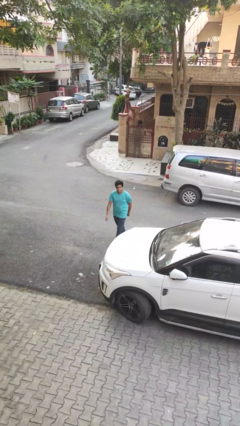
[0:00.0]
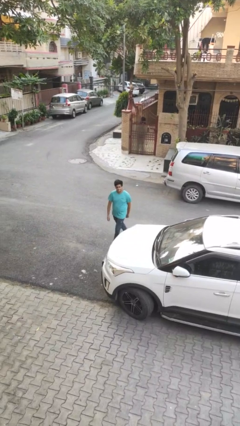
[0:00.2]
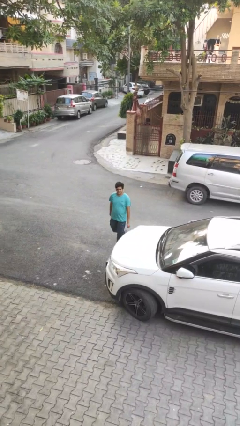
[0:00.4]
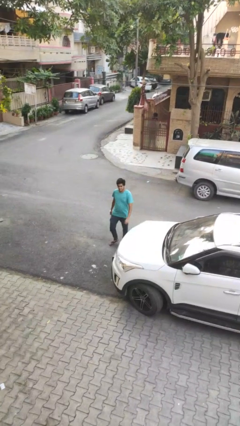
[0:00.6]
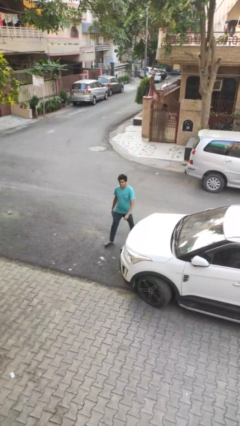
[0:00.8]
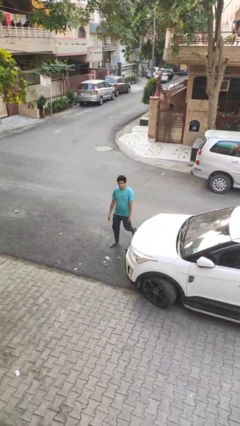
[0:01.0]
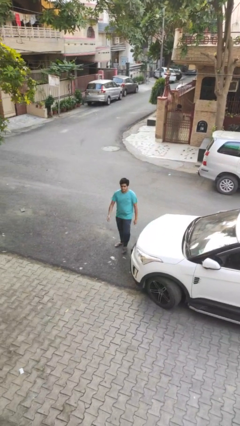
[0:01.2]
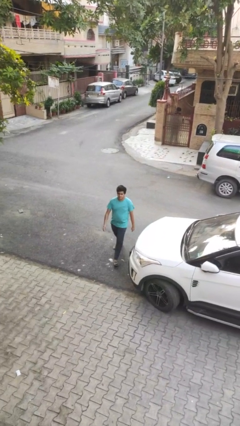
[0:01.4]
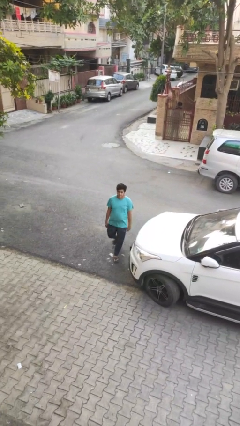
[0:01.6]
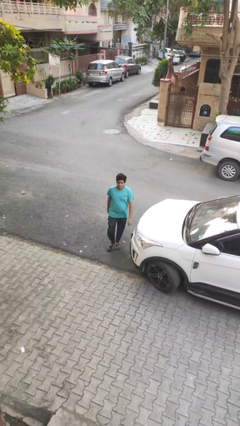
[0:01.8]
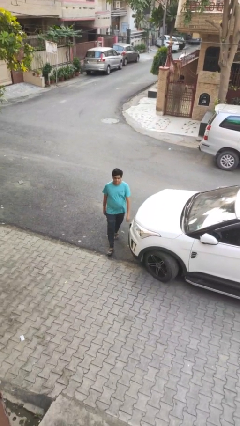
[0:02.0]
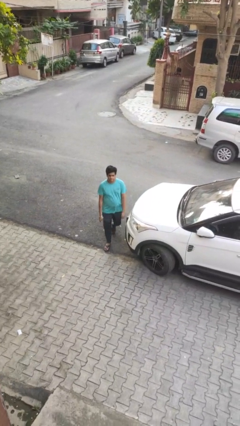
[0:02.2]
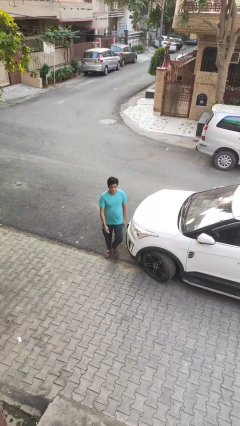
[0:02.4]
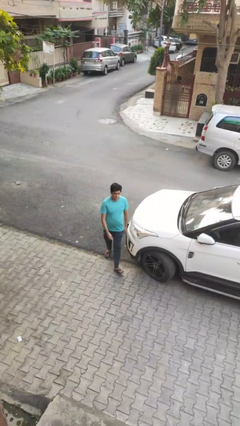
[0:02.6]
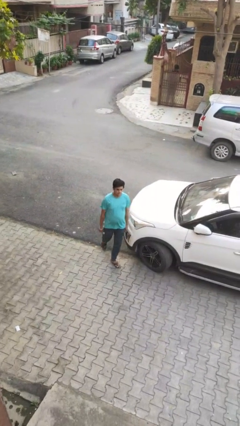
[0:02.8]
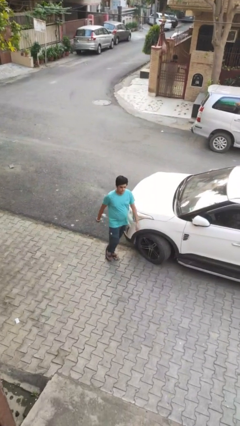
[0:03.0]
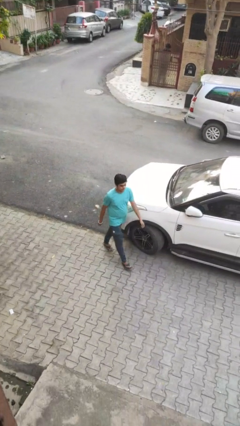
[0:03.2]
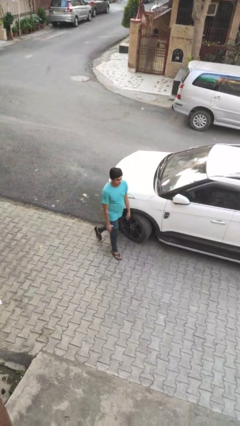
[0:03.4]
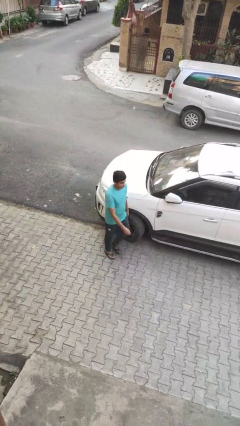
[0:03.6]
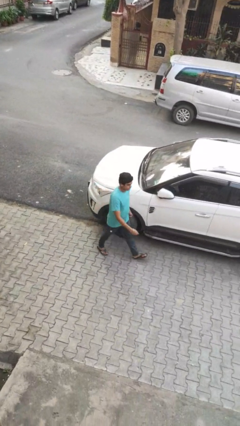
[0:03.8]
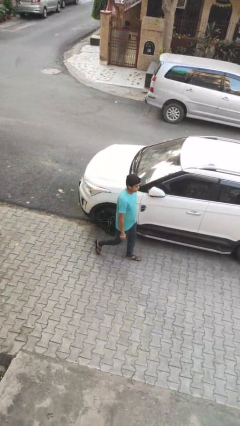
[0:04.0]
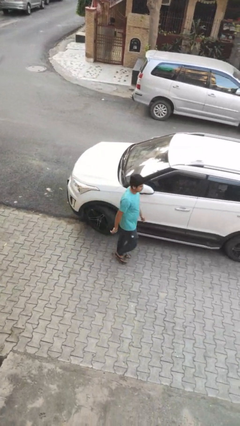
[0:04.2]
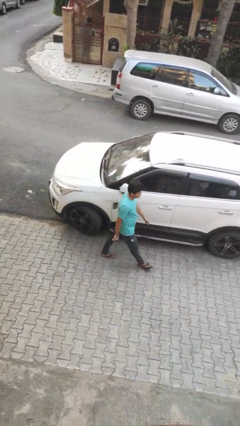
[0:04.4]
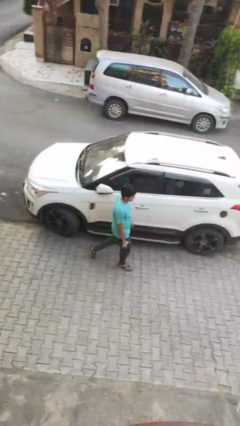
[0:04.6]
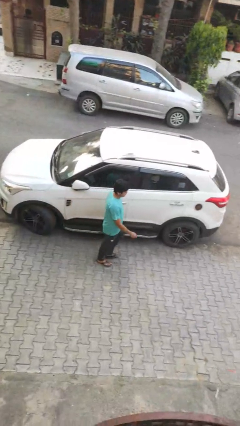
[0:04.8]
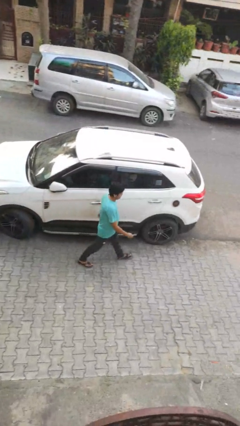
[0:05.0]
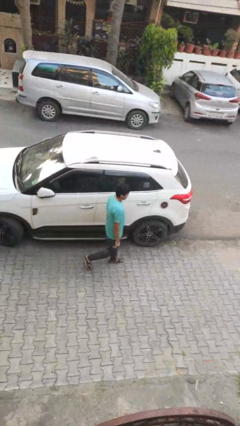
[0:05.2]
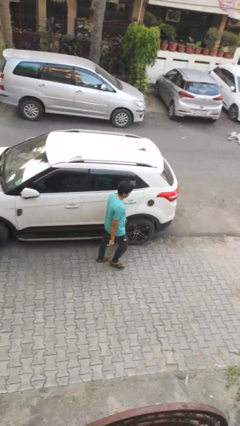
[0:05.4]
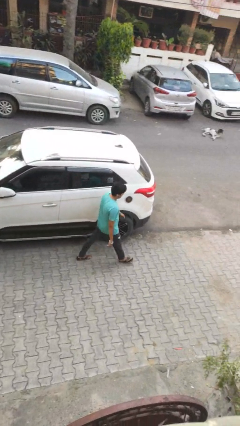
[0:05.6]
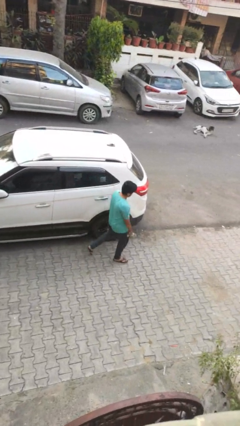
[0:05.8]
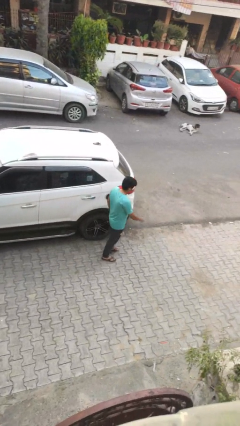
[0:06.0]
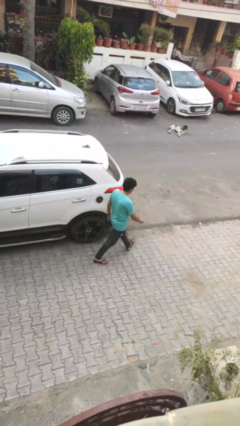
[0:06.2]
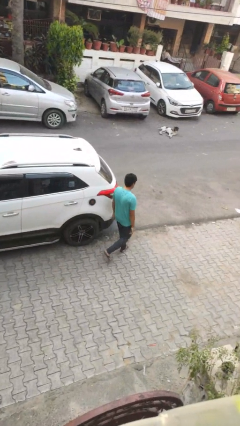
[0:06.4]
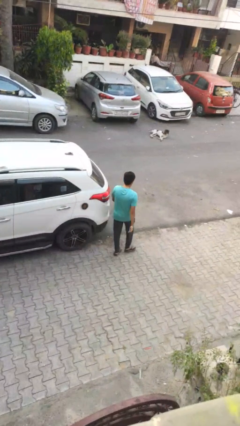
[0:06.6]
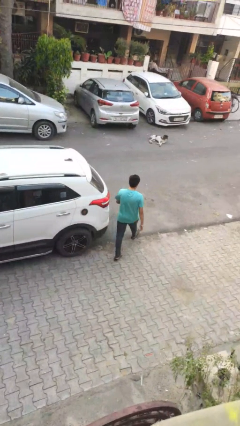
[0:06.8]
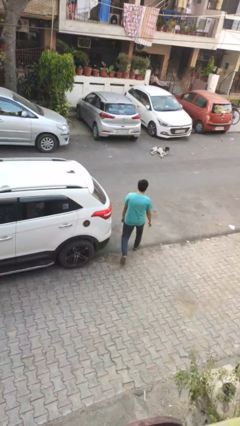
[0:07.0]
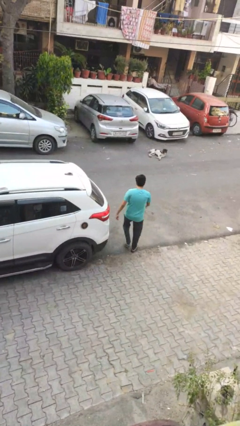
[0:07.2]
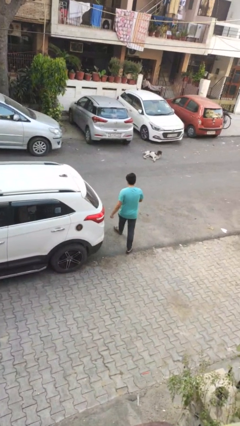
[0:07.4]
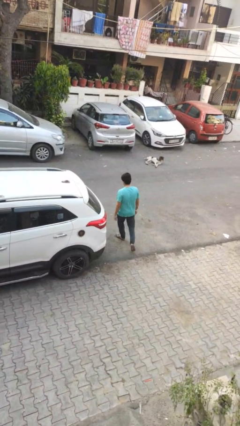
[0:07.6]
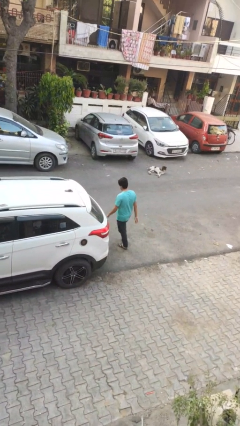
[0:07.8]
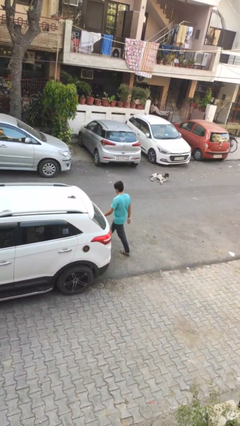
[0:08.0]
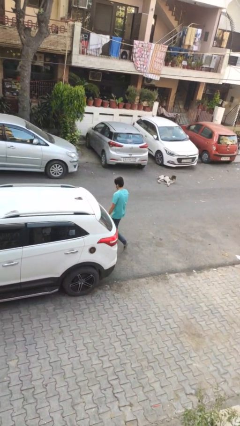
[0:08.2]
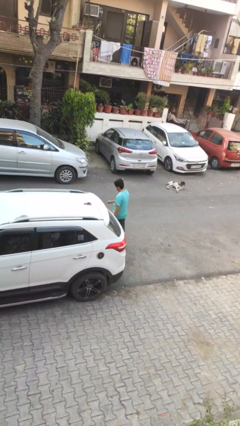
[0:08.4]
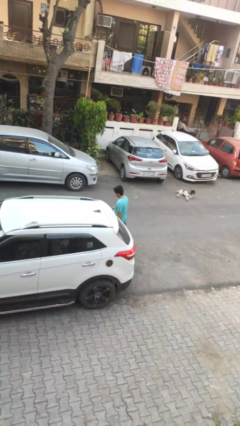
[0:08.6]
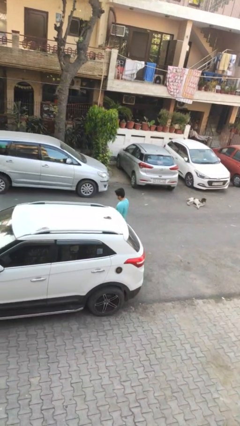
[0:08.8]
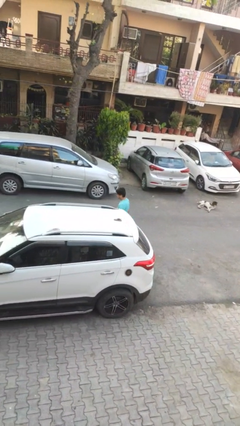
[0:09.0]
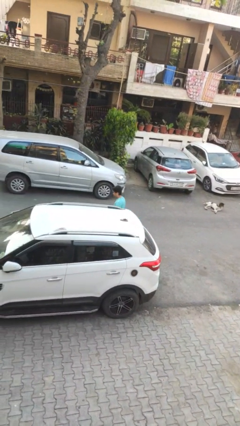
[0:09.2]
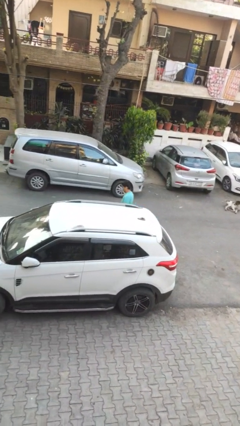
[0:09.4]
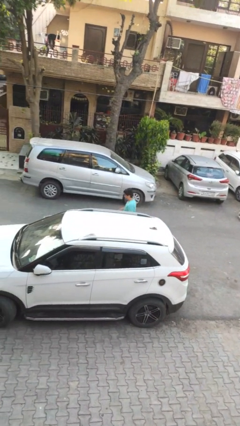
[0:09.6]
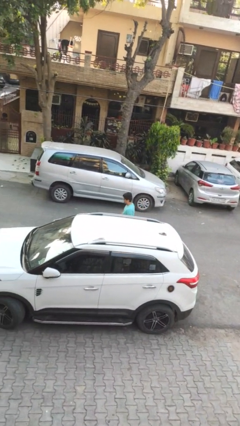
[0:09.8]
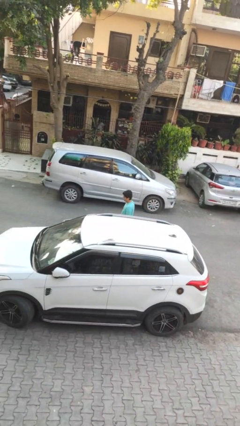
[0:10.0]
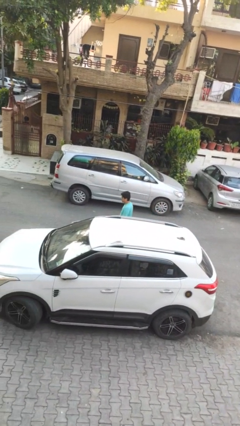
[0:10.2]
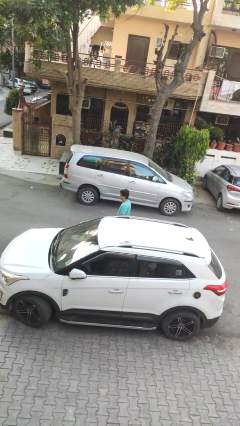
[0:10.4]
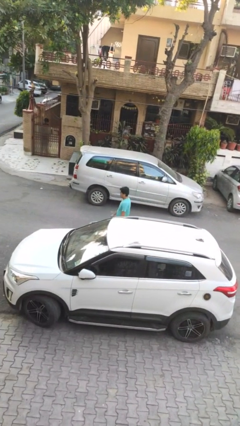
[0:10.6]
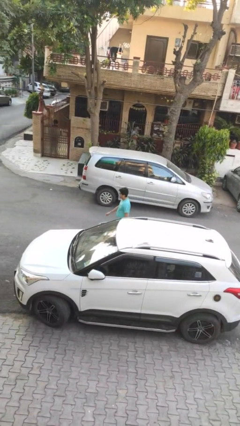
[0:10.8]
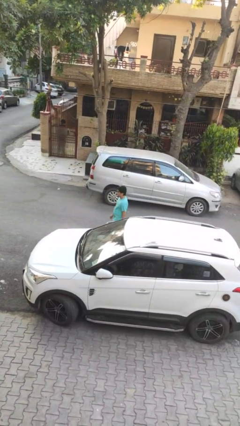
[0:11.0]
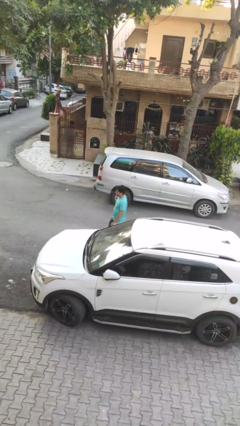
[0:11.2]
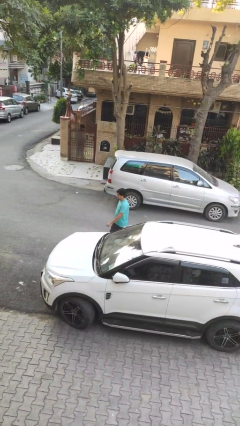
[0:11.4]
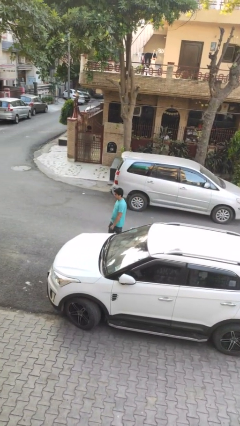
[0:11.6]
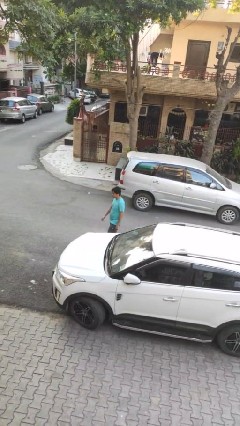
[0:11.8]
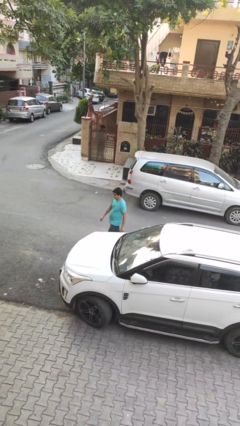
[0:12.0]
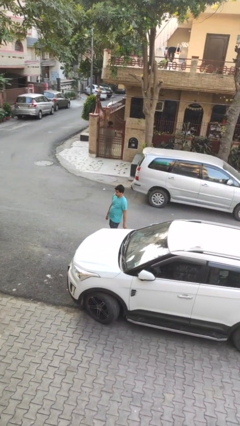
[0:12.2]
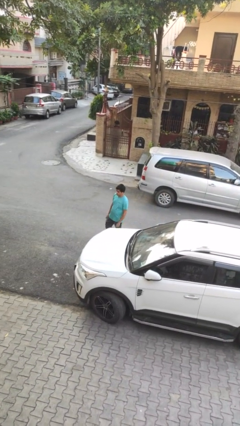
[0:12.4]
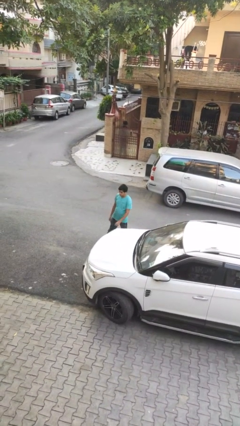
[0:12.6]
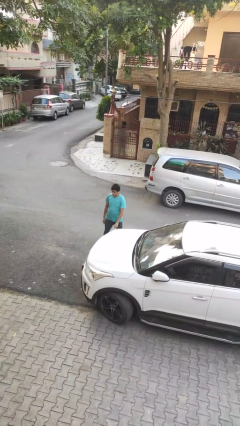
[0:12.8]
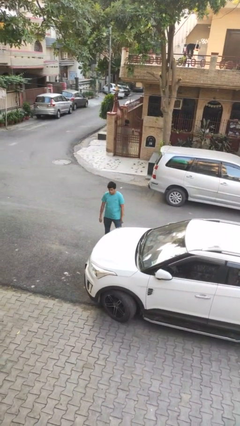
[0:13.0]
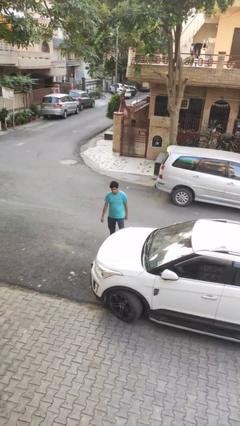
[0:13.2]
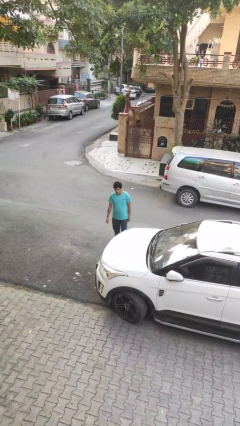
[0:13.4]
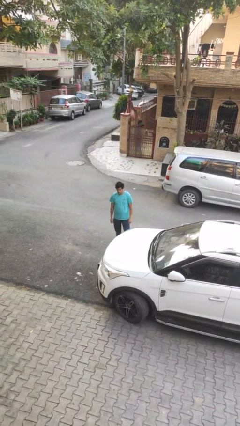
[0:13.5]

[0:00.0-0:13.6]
person walks around car

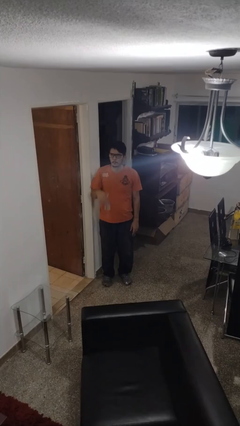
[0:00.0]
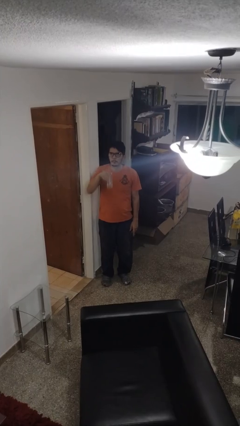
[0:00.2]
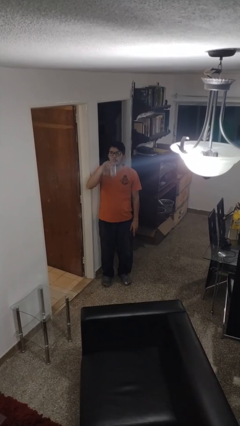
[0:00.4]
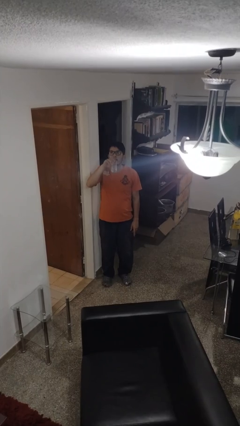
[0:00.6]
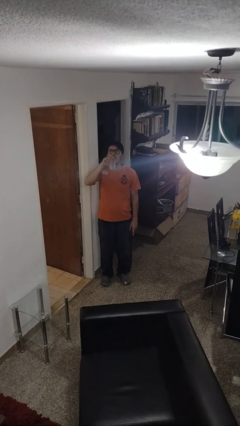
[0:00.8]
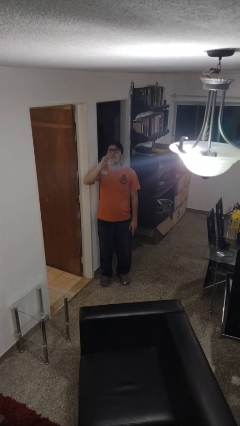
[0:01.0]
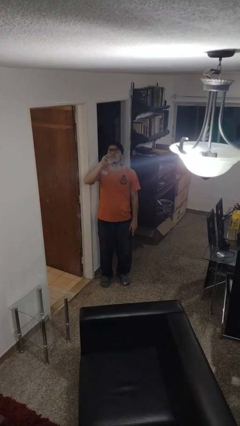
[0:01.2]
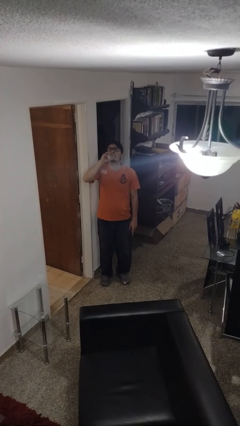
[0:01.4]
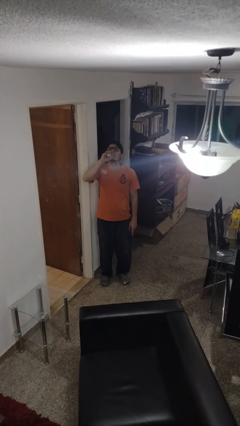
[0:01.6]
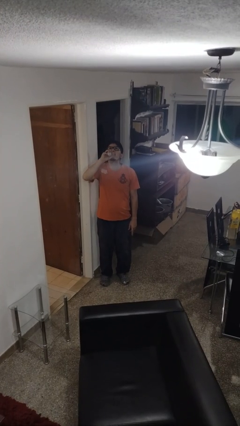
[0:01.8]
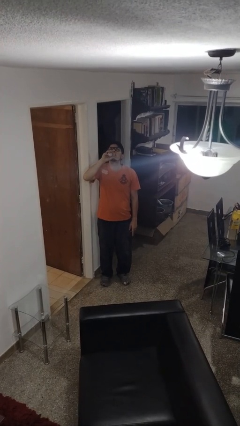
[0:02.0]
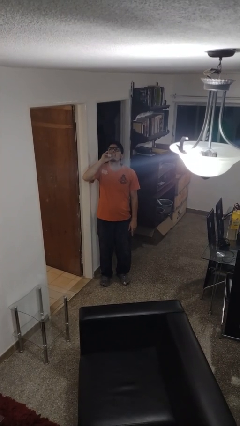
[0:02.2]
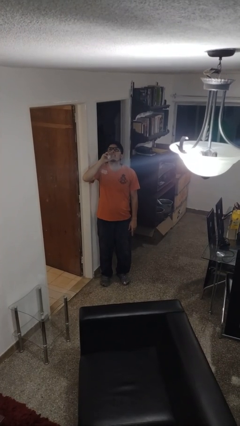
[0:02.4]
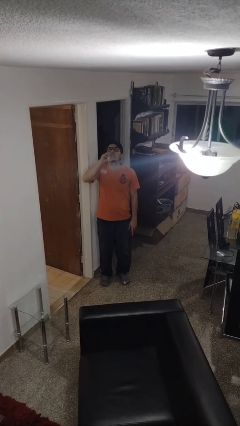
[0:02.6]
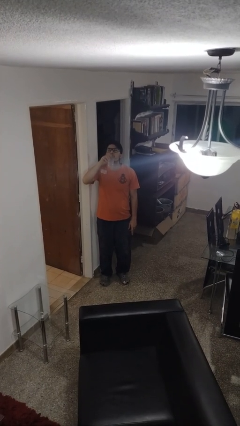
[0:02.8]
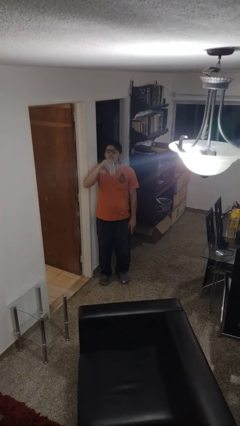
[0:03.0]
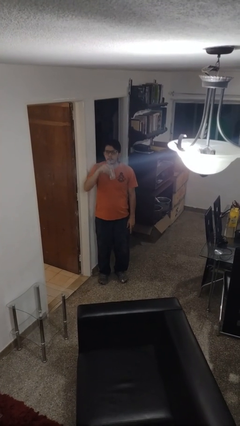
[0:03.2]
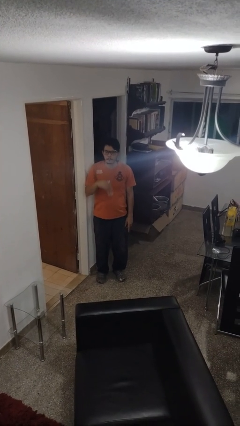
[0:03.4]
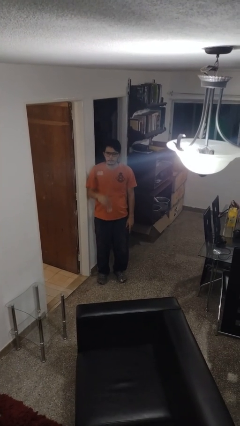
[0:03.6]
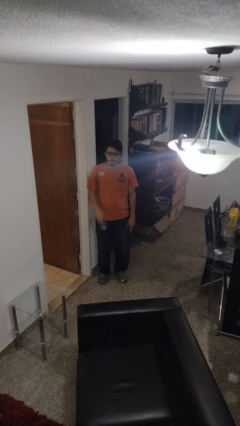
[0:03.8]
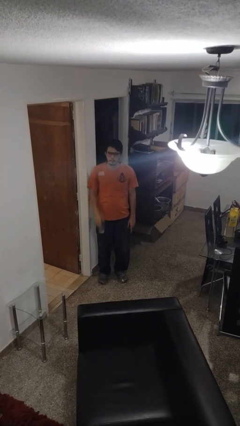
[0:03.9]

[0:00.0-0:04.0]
person drinks from bottle

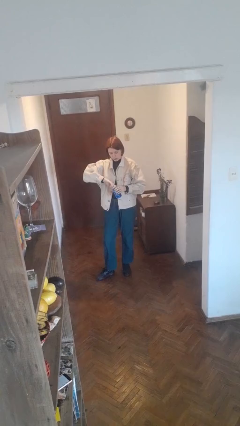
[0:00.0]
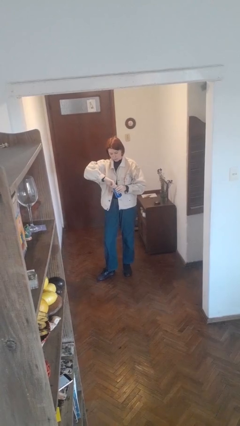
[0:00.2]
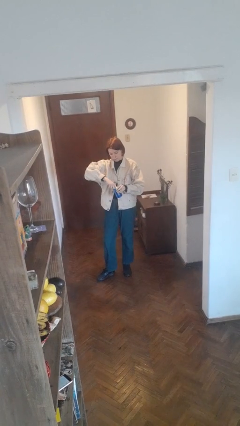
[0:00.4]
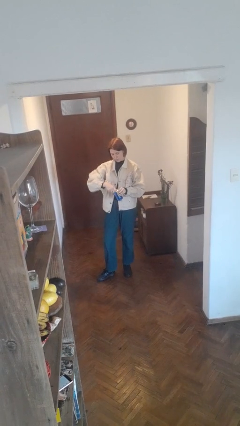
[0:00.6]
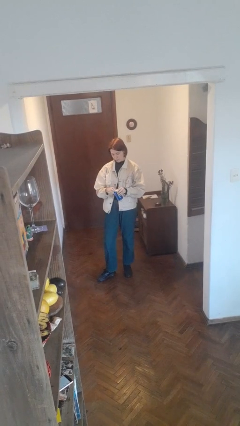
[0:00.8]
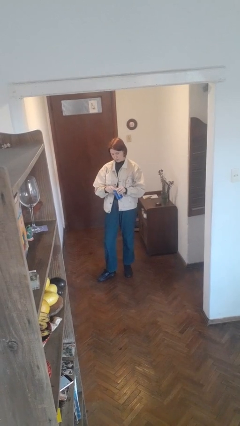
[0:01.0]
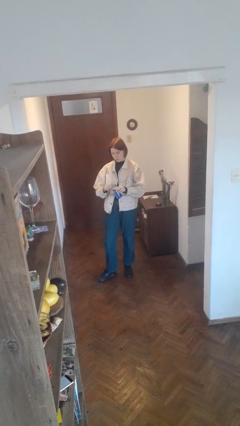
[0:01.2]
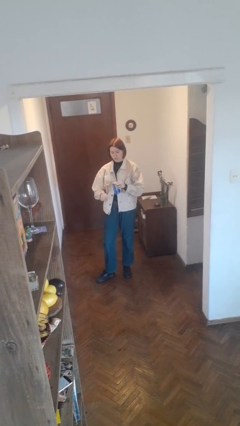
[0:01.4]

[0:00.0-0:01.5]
person opens beverage can
